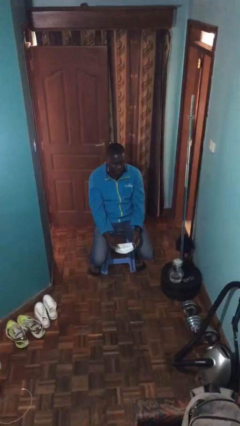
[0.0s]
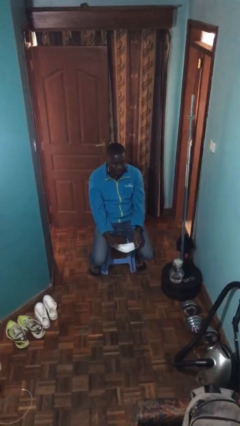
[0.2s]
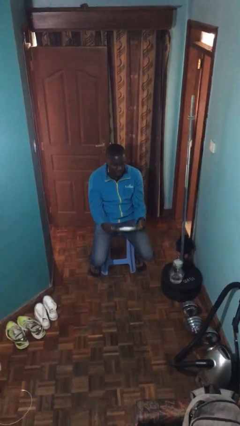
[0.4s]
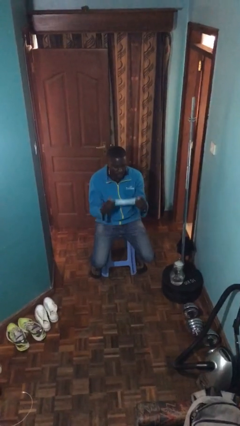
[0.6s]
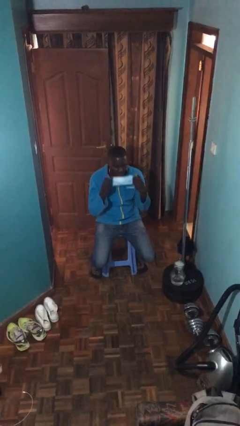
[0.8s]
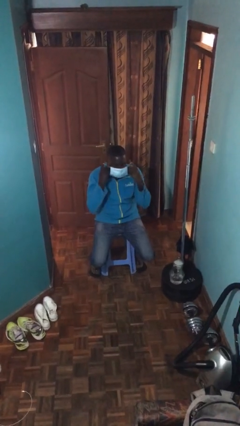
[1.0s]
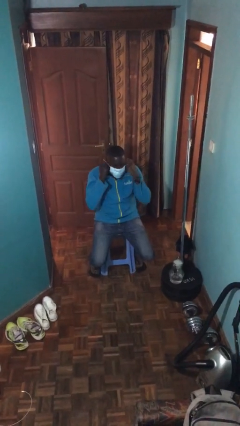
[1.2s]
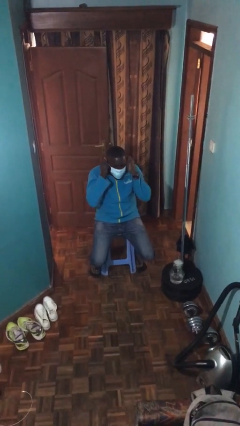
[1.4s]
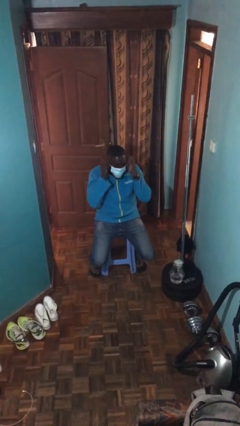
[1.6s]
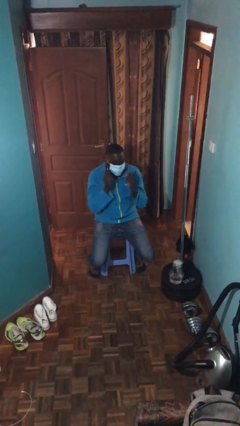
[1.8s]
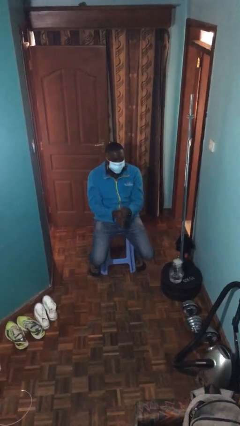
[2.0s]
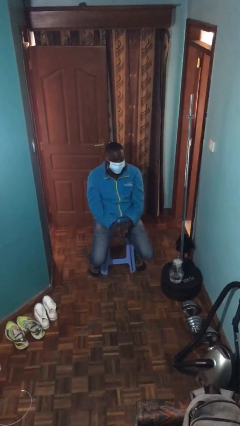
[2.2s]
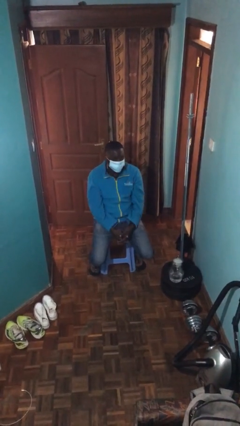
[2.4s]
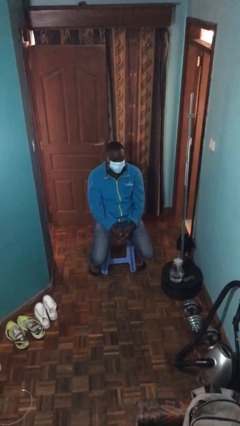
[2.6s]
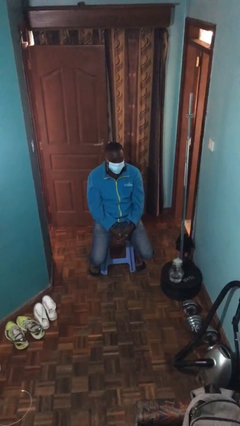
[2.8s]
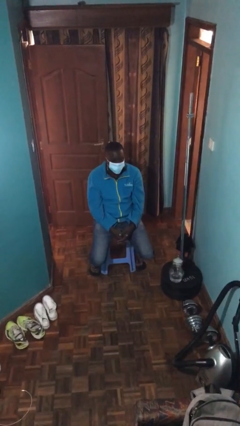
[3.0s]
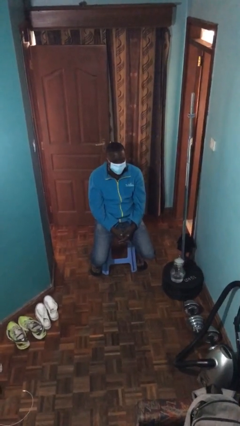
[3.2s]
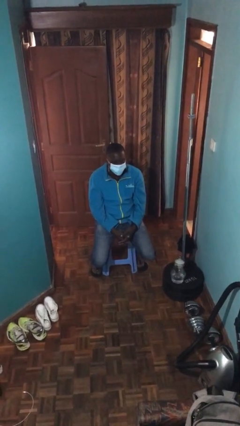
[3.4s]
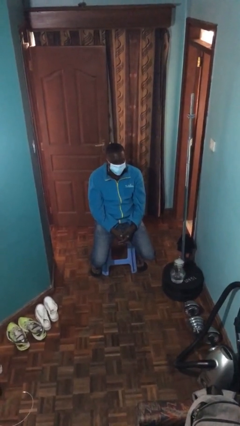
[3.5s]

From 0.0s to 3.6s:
person puts on facemask

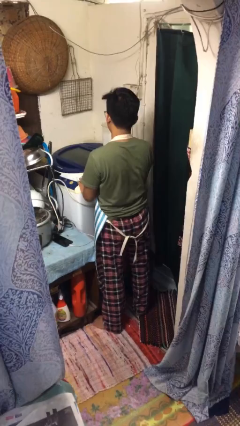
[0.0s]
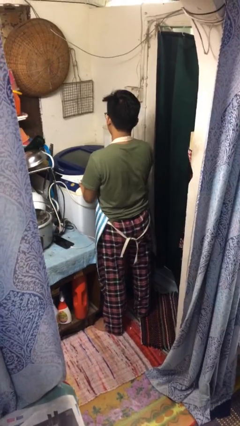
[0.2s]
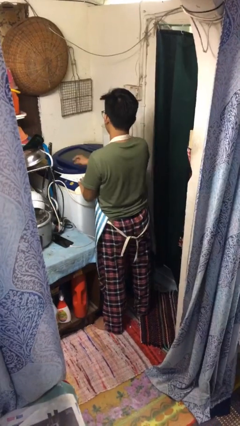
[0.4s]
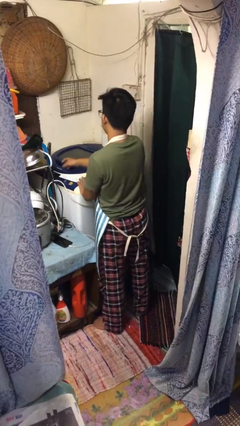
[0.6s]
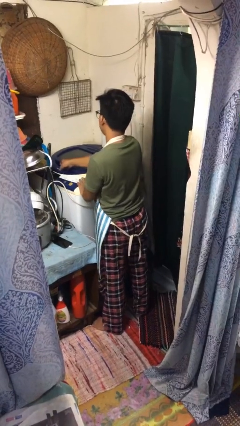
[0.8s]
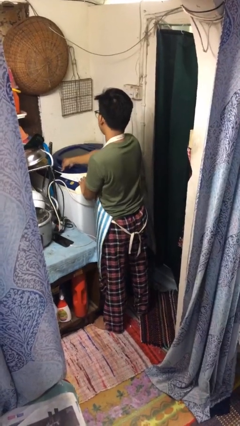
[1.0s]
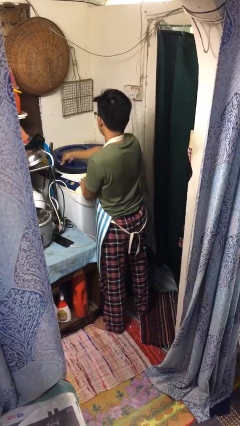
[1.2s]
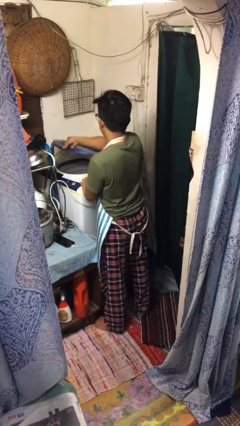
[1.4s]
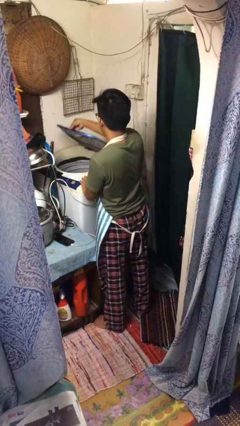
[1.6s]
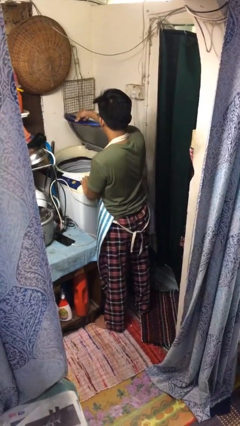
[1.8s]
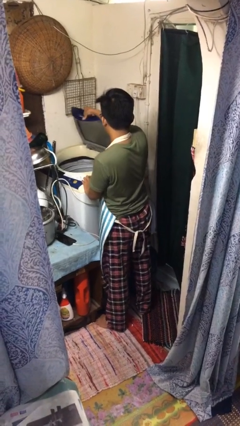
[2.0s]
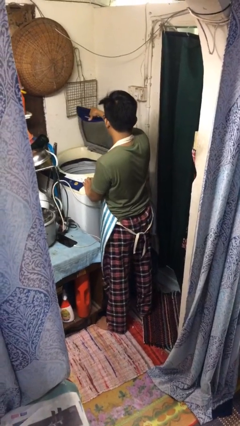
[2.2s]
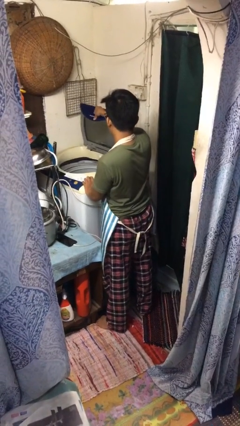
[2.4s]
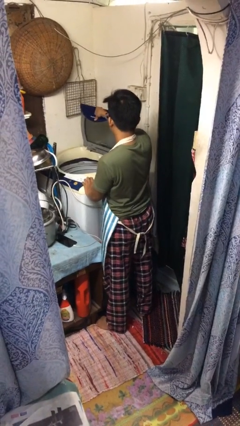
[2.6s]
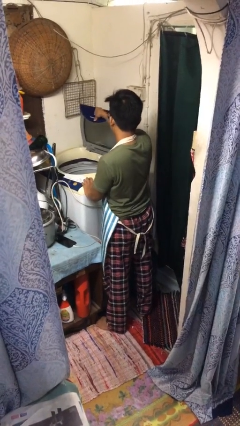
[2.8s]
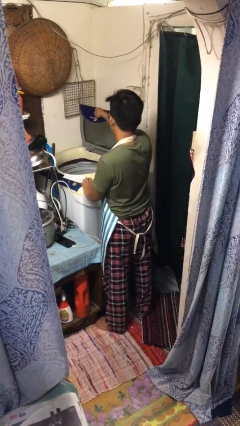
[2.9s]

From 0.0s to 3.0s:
person opens clothes washer

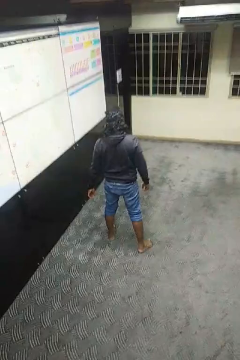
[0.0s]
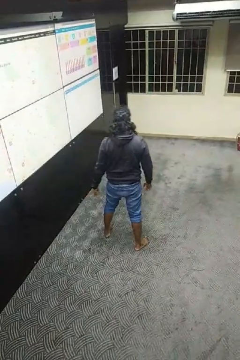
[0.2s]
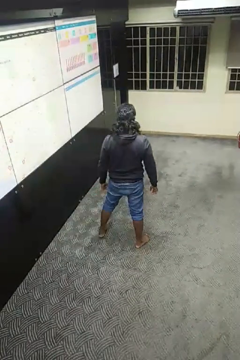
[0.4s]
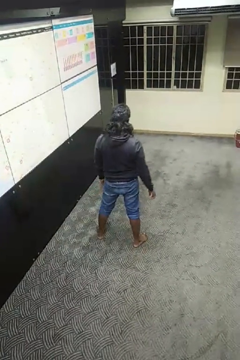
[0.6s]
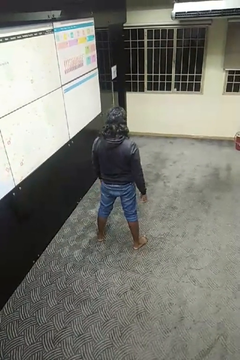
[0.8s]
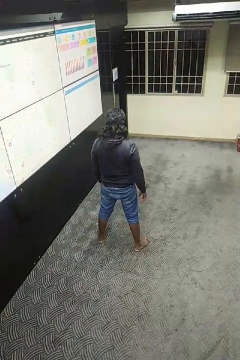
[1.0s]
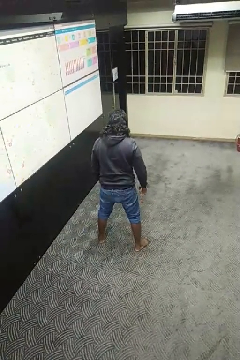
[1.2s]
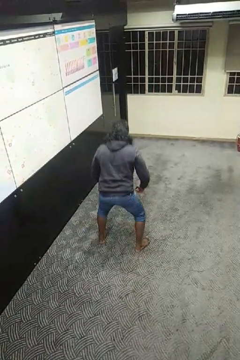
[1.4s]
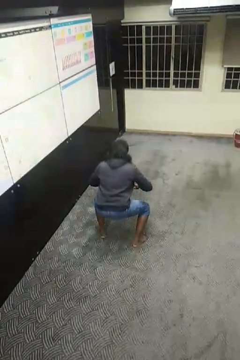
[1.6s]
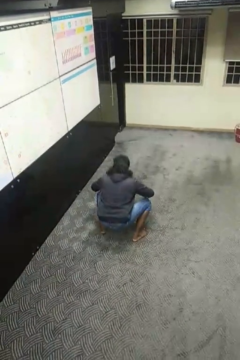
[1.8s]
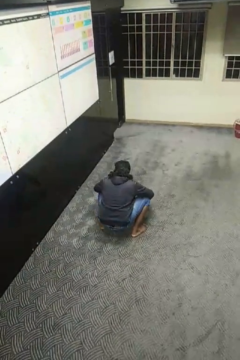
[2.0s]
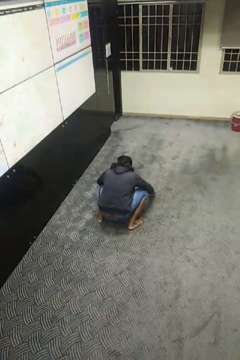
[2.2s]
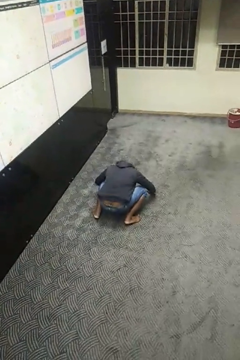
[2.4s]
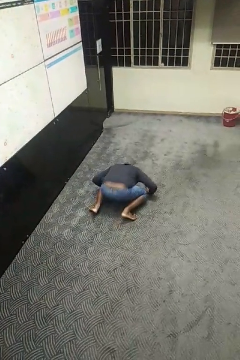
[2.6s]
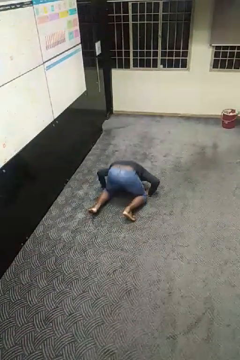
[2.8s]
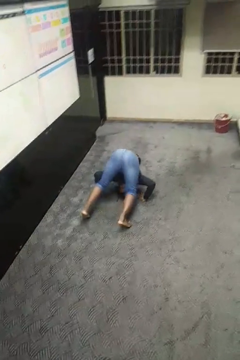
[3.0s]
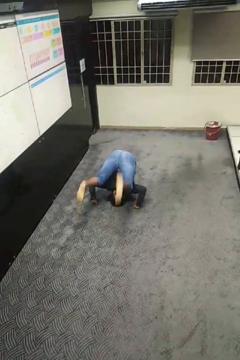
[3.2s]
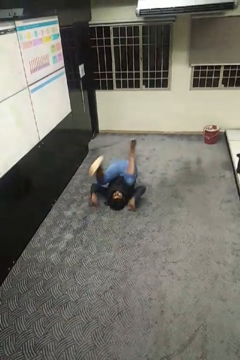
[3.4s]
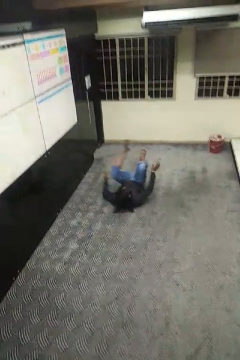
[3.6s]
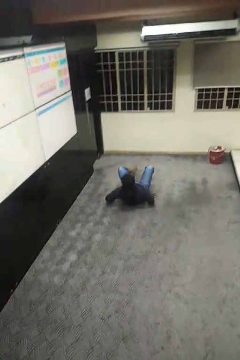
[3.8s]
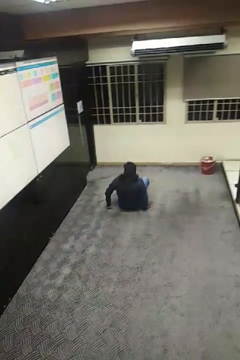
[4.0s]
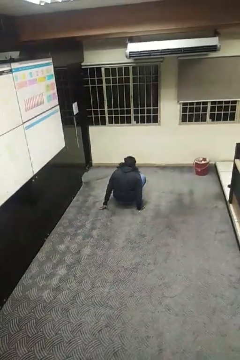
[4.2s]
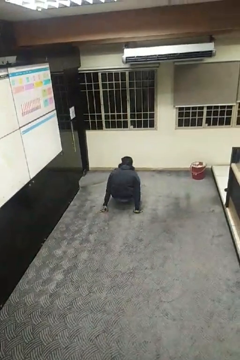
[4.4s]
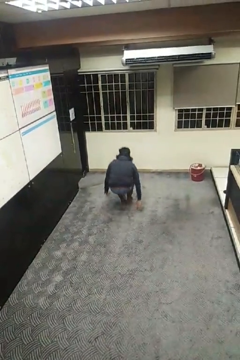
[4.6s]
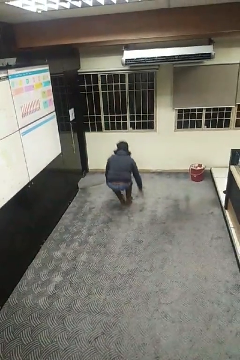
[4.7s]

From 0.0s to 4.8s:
person somersaults

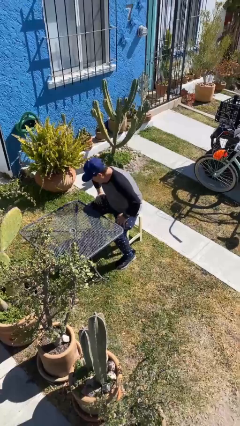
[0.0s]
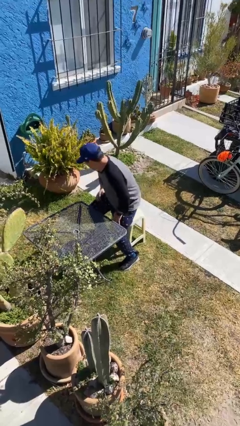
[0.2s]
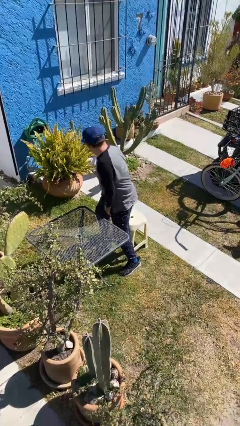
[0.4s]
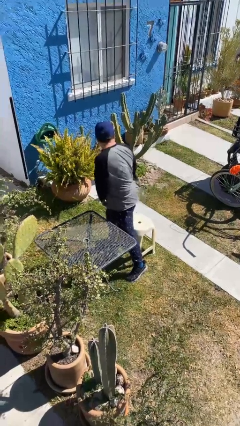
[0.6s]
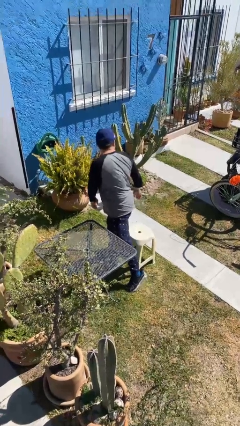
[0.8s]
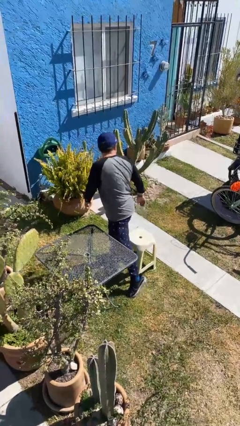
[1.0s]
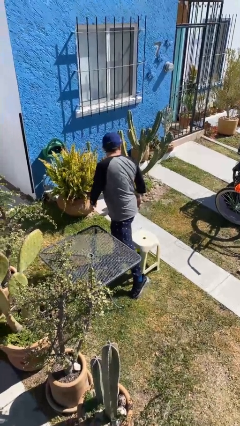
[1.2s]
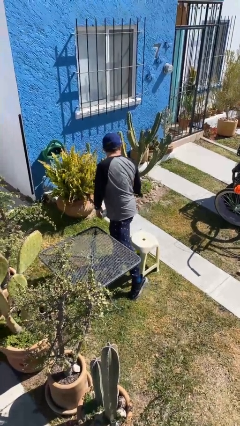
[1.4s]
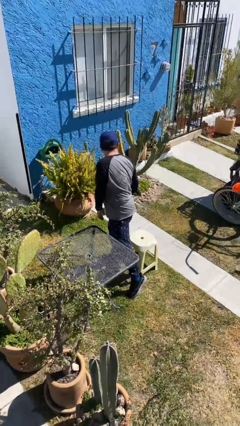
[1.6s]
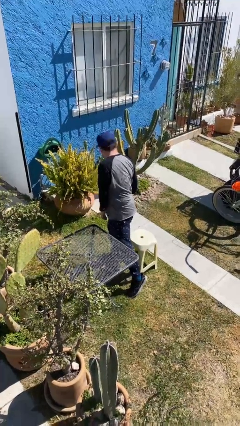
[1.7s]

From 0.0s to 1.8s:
person stands up

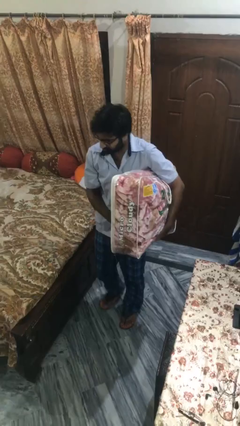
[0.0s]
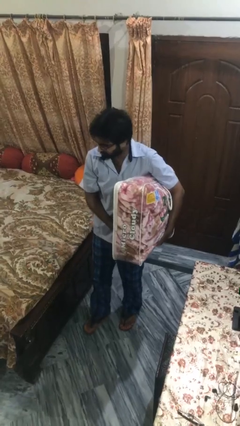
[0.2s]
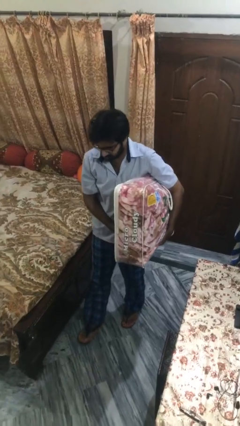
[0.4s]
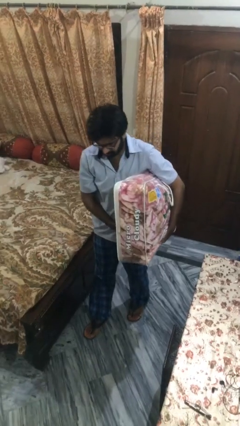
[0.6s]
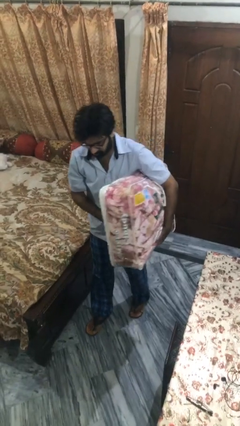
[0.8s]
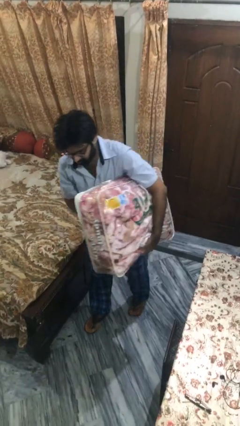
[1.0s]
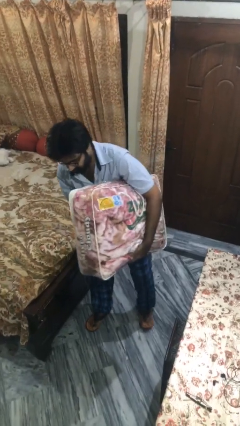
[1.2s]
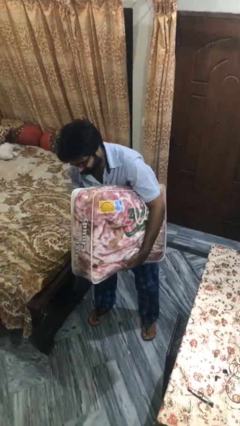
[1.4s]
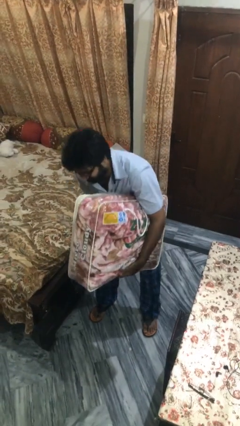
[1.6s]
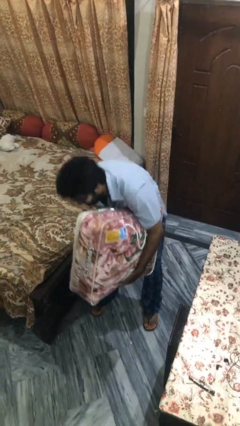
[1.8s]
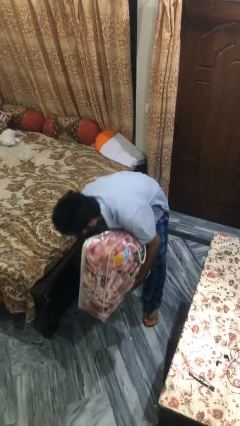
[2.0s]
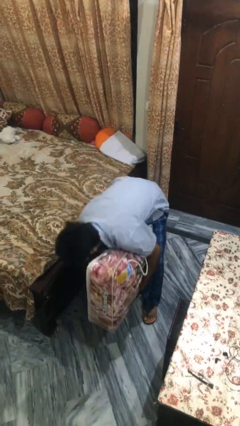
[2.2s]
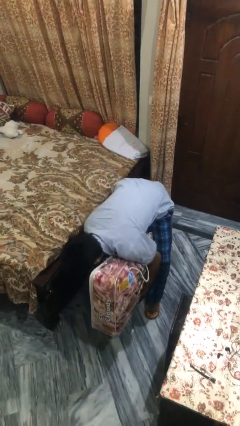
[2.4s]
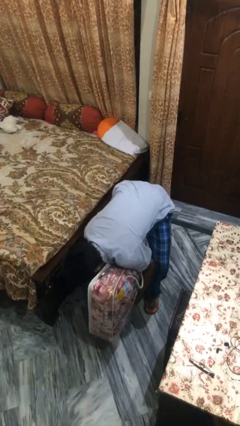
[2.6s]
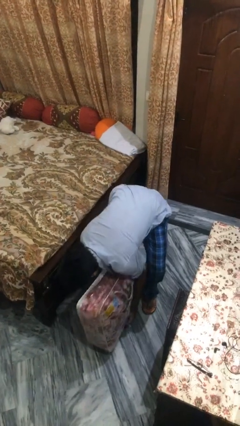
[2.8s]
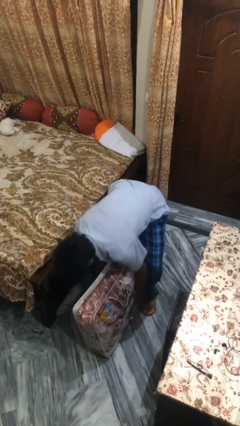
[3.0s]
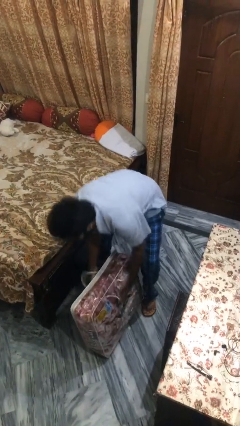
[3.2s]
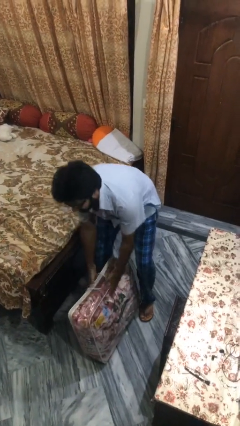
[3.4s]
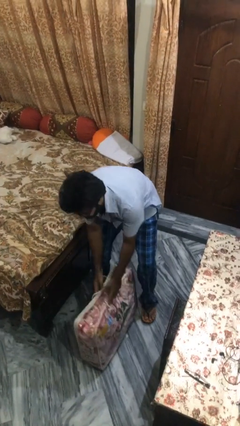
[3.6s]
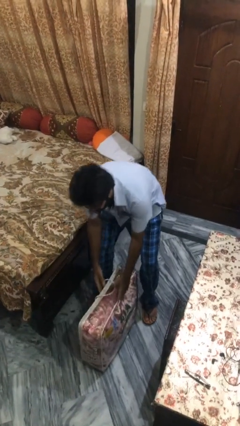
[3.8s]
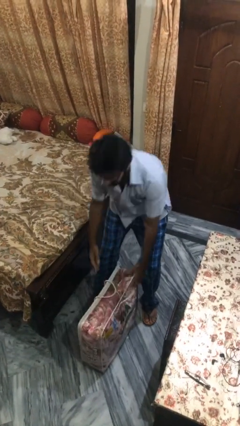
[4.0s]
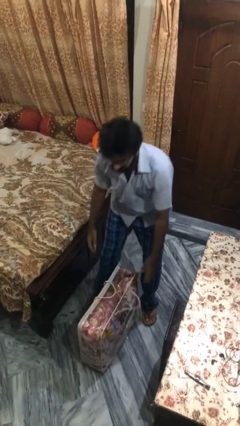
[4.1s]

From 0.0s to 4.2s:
person puts down object on floor

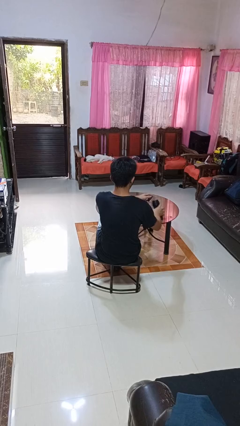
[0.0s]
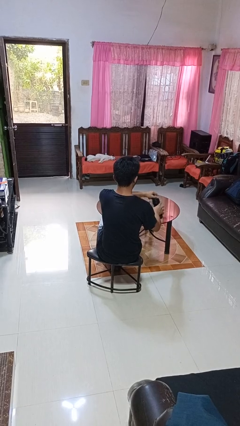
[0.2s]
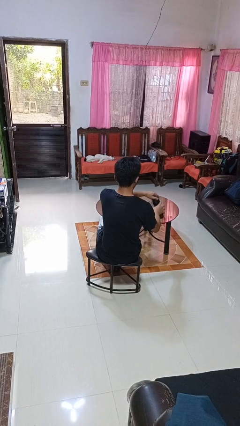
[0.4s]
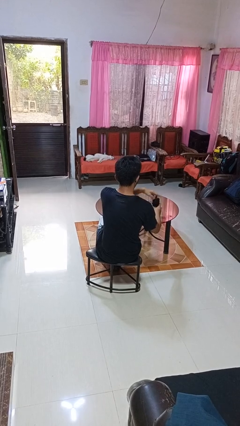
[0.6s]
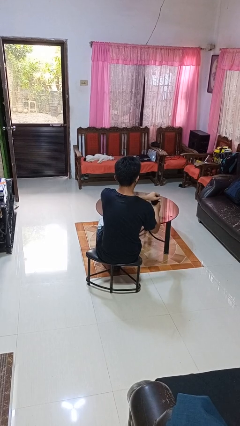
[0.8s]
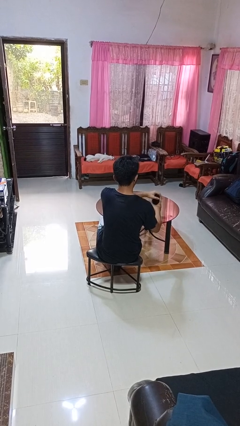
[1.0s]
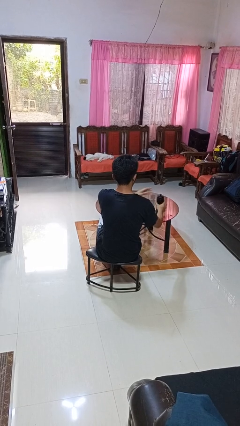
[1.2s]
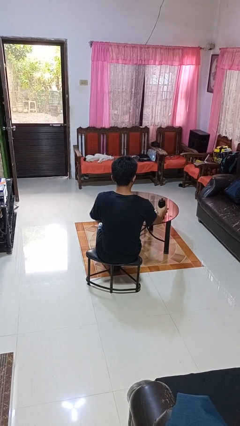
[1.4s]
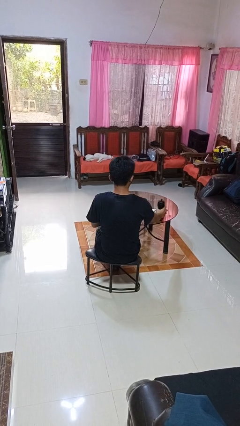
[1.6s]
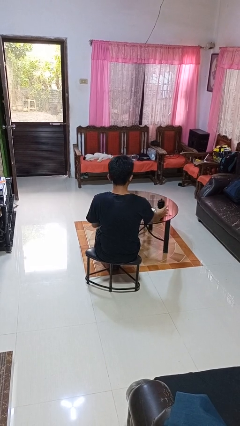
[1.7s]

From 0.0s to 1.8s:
person screws lid to bottle
